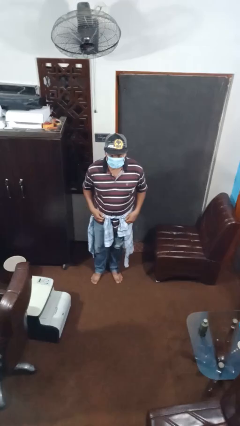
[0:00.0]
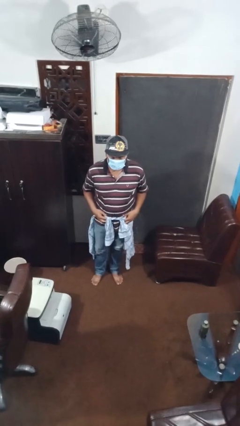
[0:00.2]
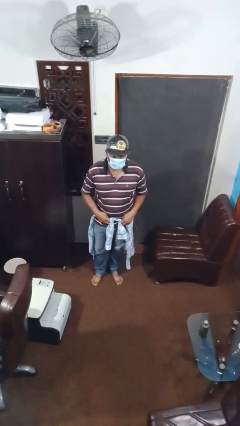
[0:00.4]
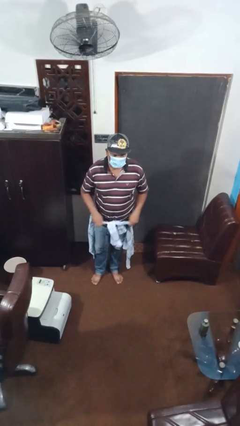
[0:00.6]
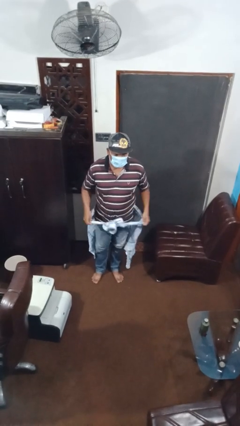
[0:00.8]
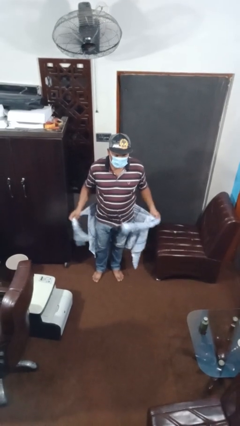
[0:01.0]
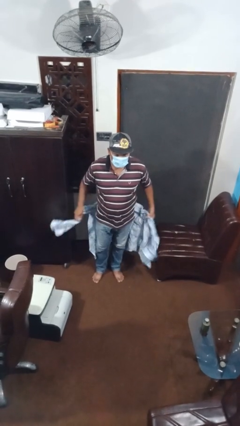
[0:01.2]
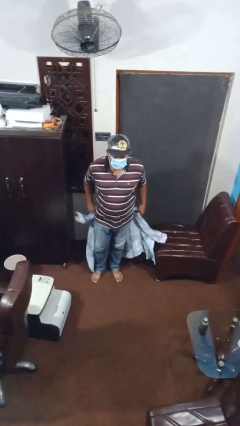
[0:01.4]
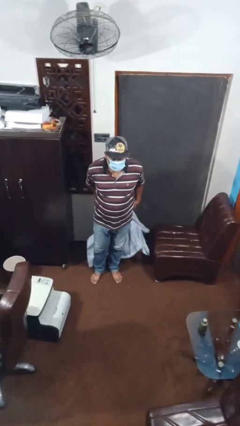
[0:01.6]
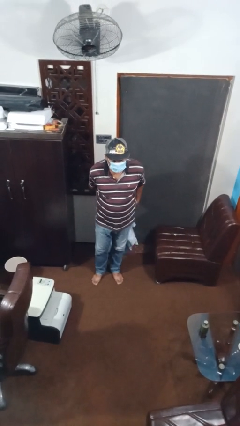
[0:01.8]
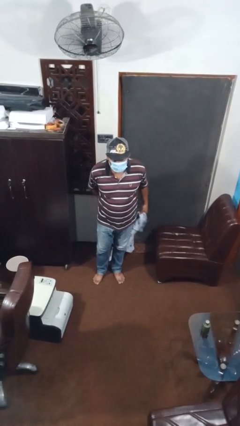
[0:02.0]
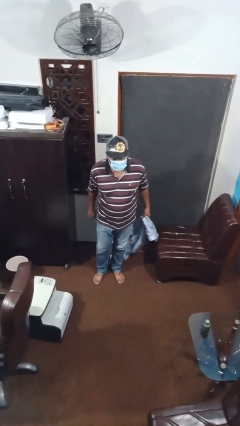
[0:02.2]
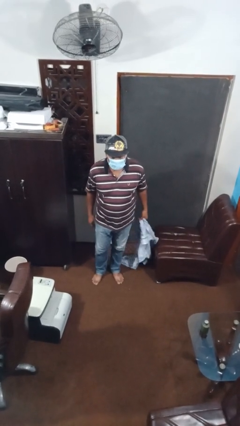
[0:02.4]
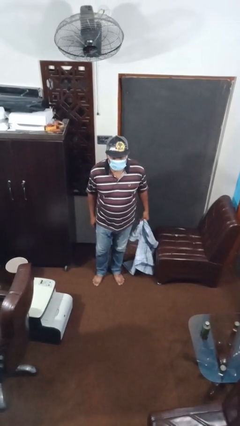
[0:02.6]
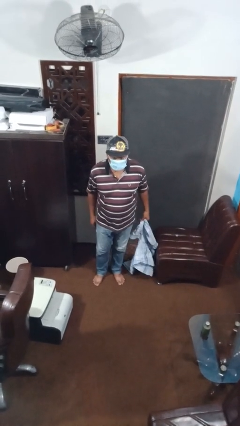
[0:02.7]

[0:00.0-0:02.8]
person unties jacket around waist

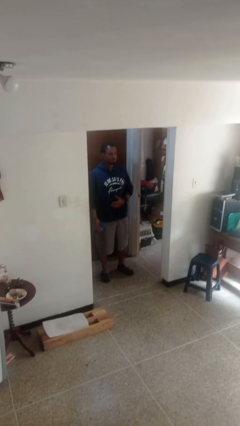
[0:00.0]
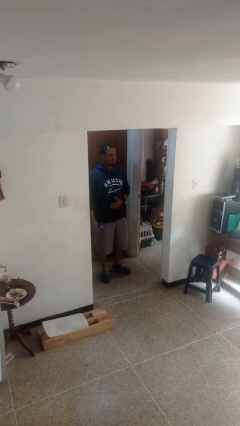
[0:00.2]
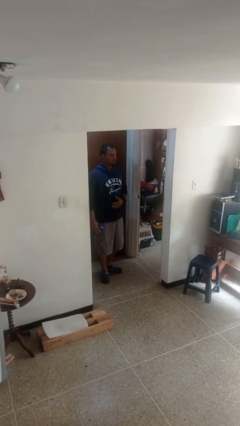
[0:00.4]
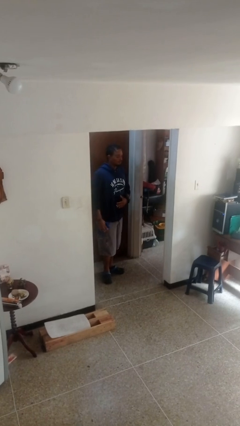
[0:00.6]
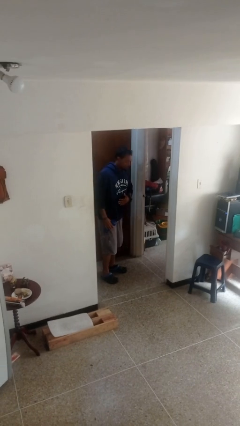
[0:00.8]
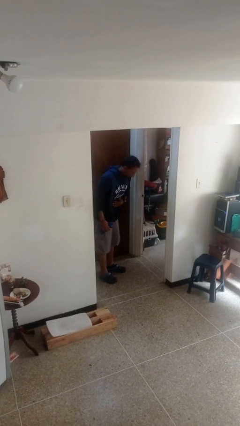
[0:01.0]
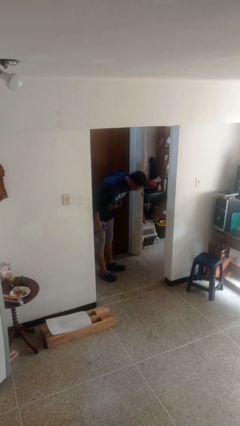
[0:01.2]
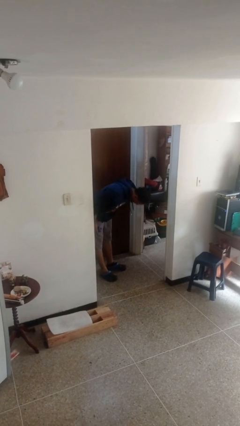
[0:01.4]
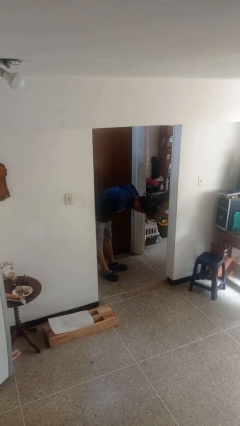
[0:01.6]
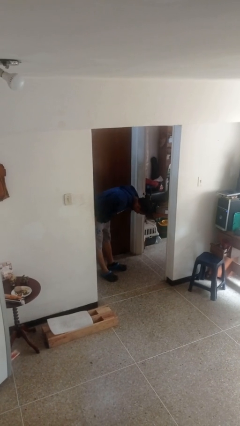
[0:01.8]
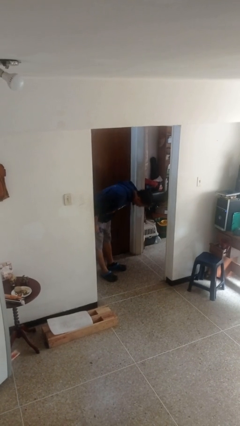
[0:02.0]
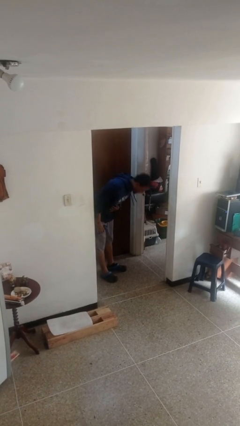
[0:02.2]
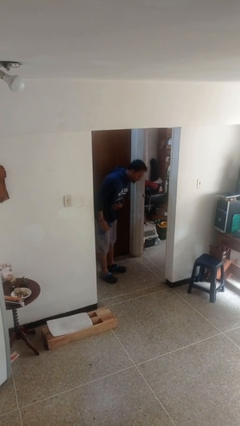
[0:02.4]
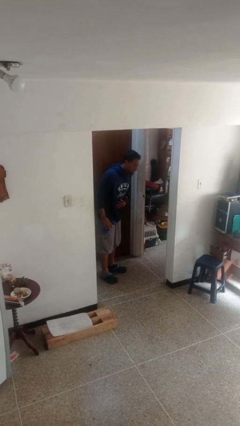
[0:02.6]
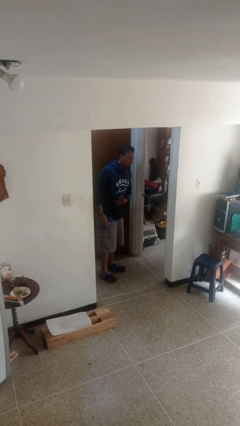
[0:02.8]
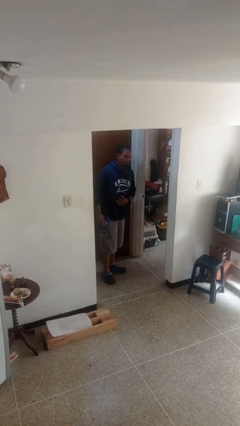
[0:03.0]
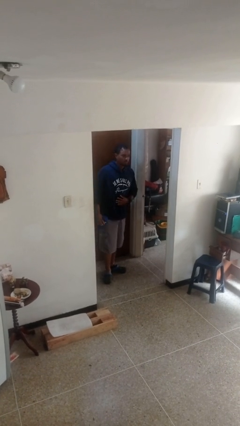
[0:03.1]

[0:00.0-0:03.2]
person bows

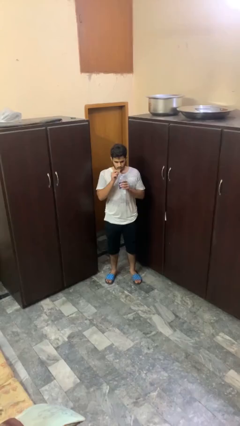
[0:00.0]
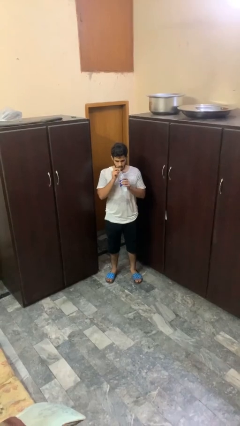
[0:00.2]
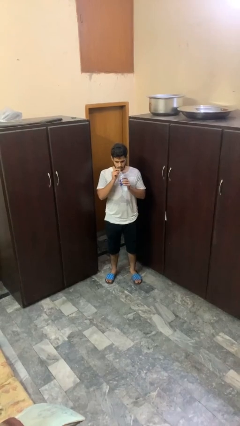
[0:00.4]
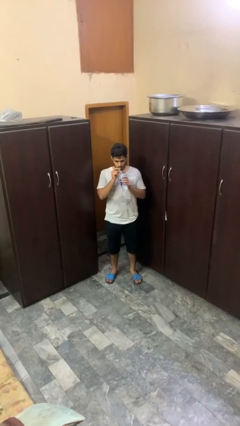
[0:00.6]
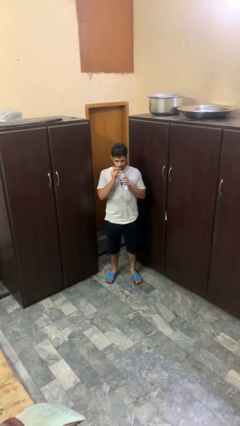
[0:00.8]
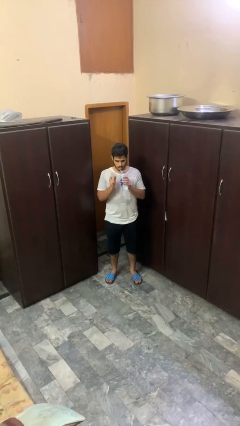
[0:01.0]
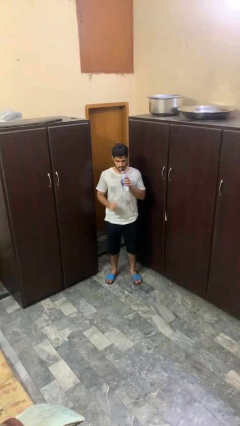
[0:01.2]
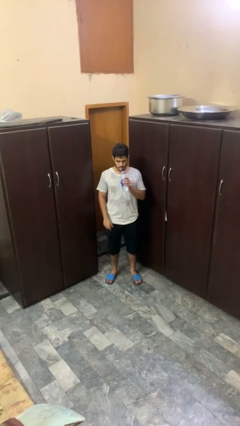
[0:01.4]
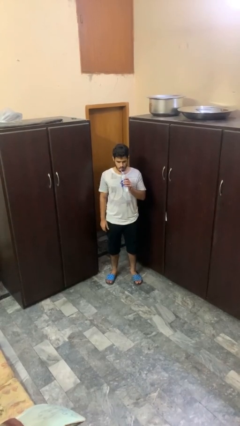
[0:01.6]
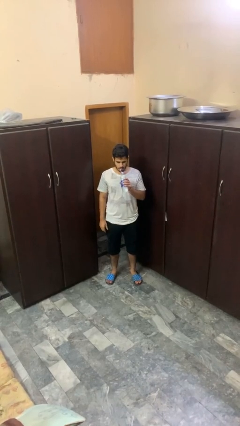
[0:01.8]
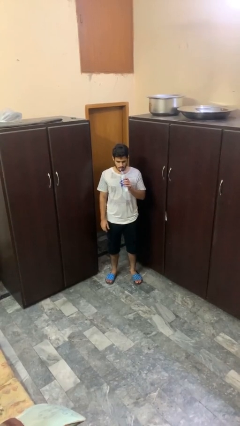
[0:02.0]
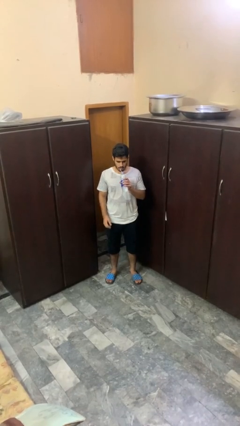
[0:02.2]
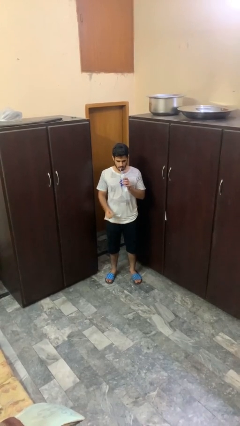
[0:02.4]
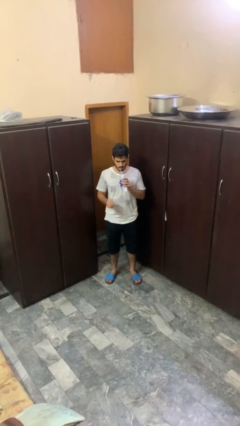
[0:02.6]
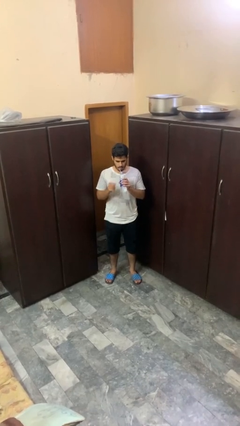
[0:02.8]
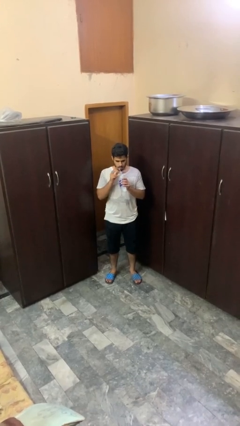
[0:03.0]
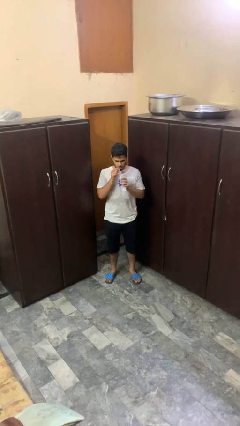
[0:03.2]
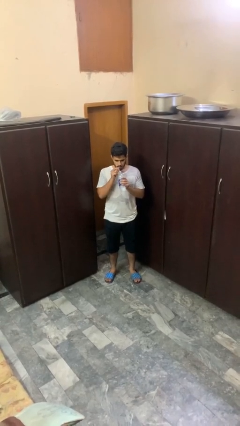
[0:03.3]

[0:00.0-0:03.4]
person drinks from straw

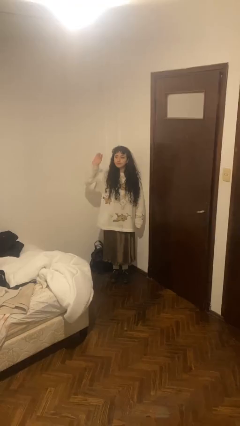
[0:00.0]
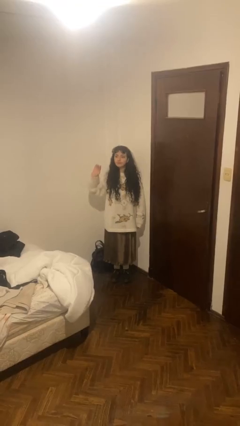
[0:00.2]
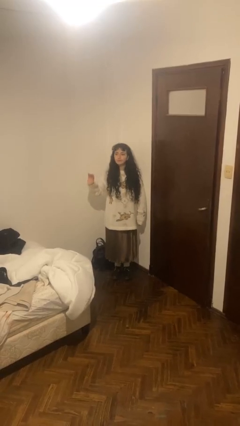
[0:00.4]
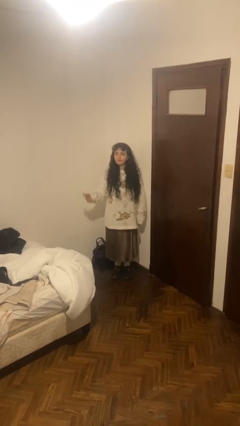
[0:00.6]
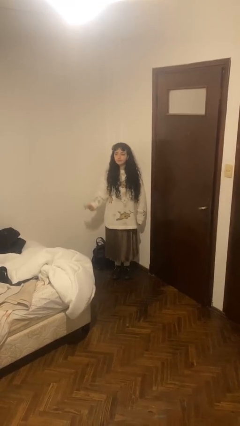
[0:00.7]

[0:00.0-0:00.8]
person gestures lower hand

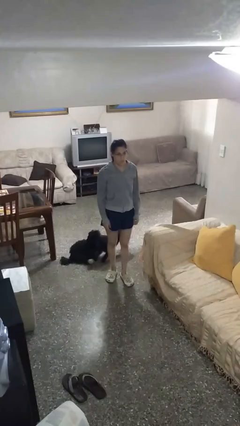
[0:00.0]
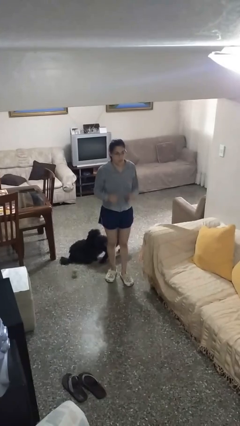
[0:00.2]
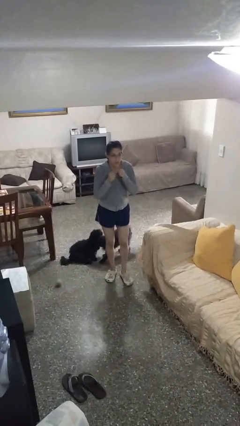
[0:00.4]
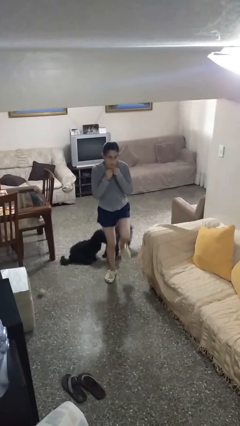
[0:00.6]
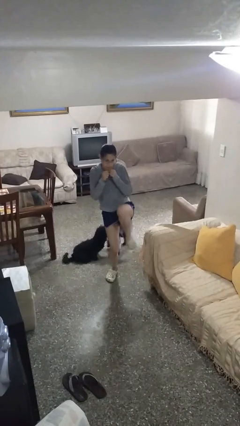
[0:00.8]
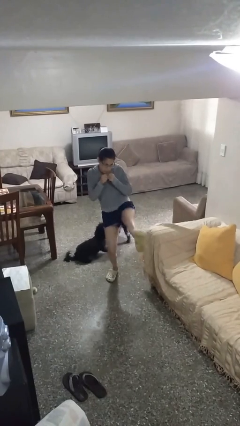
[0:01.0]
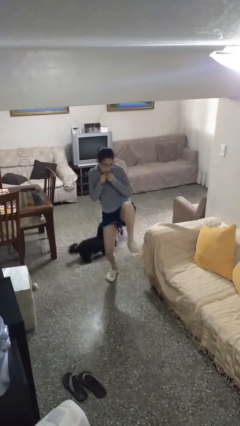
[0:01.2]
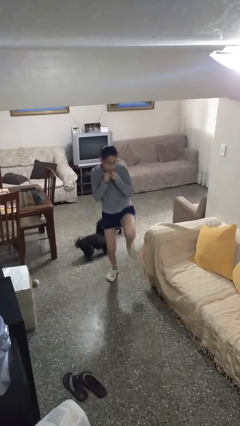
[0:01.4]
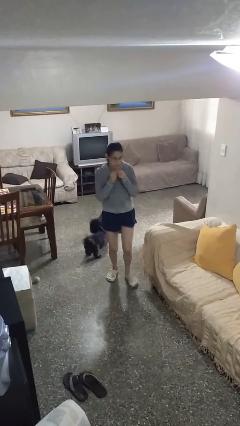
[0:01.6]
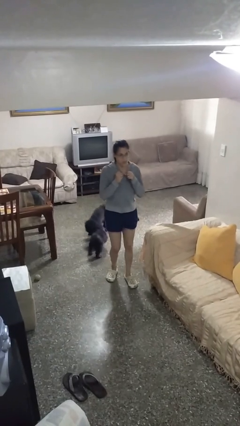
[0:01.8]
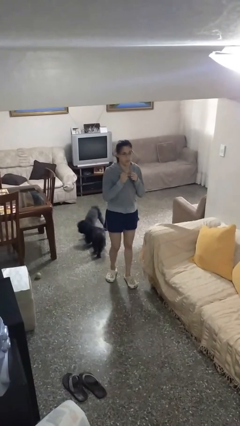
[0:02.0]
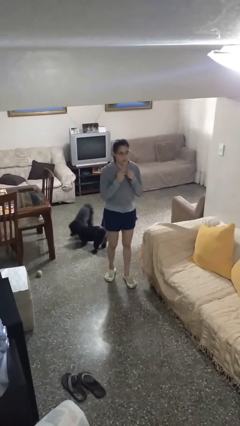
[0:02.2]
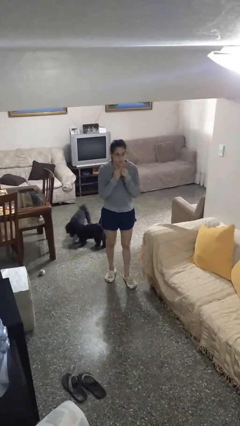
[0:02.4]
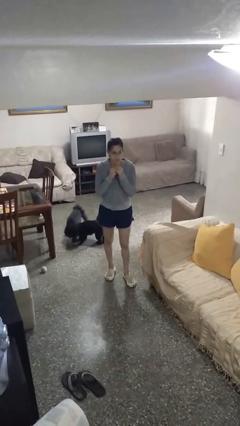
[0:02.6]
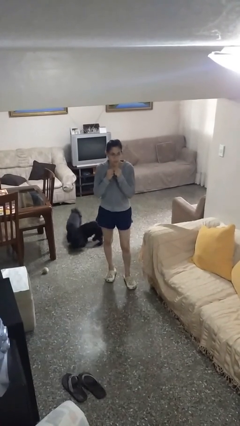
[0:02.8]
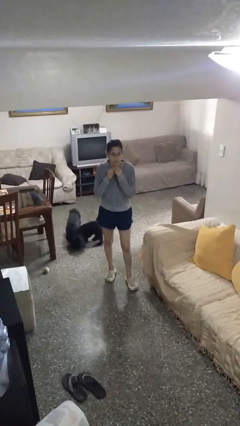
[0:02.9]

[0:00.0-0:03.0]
person karate kicks

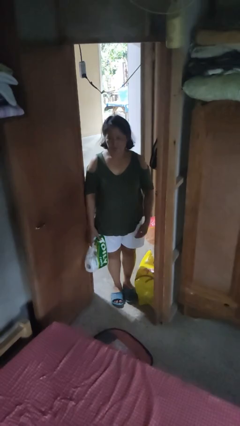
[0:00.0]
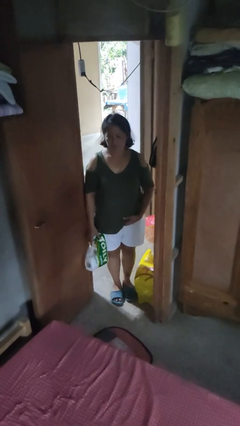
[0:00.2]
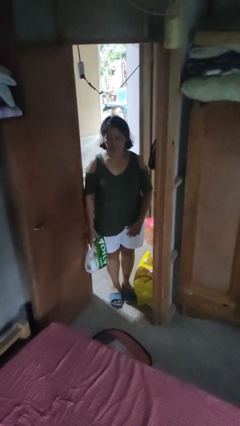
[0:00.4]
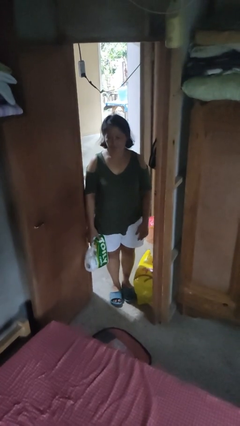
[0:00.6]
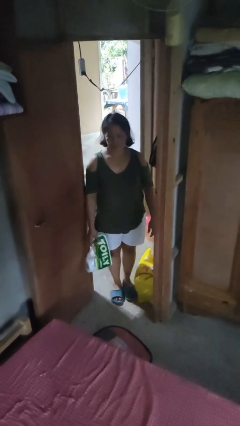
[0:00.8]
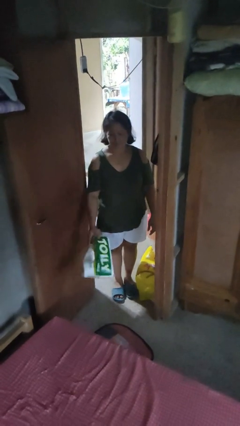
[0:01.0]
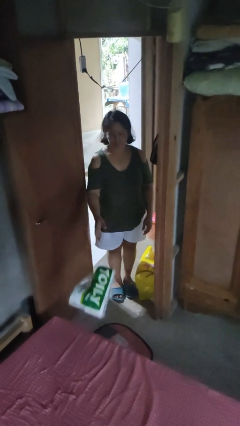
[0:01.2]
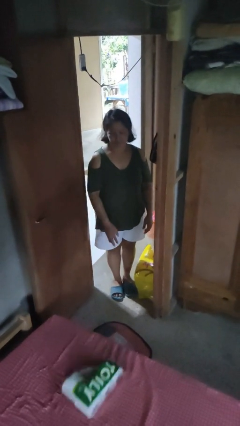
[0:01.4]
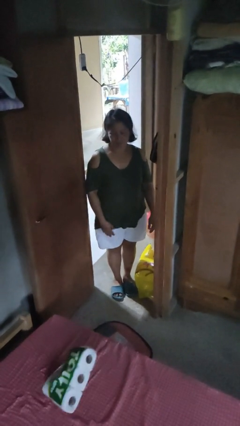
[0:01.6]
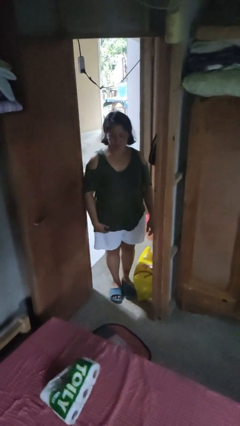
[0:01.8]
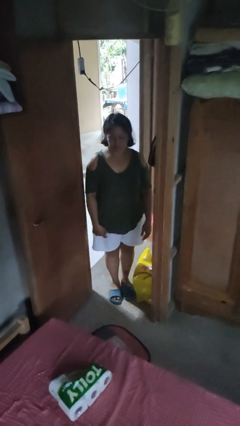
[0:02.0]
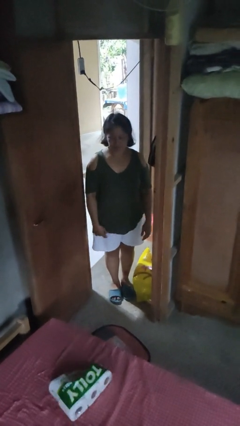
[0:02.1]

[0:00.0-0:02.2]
person throws object on bed

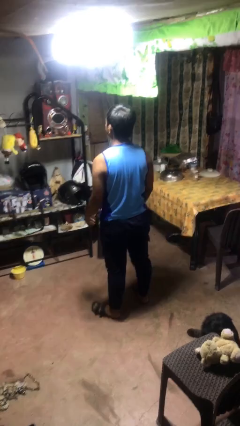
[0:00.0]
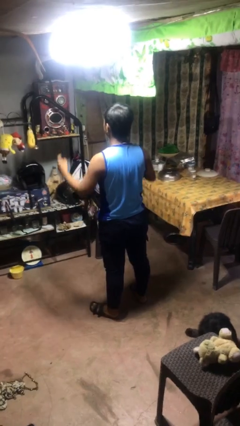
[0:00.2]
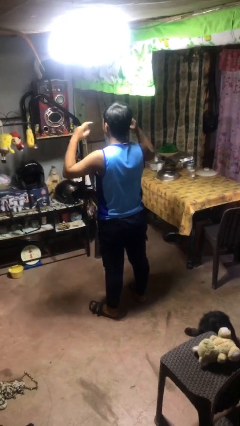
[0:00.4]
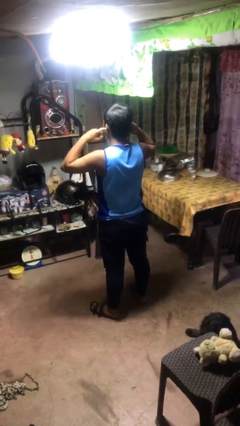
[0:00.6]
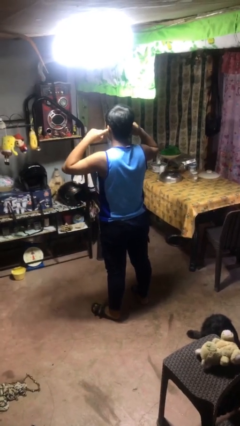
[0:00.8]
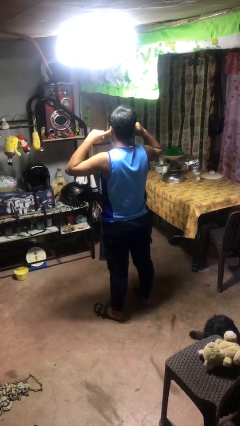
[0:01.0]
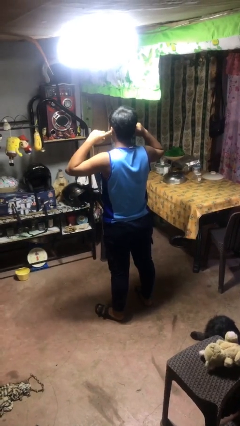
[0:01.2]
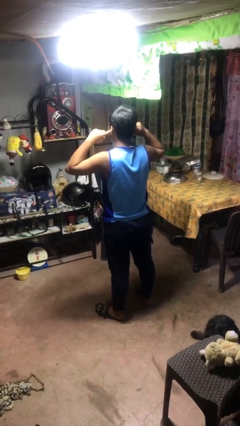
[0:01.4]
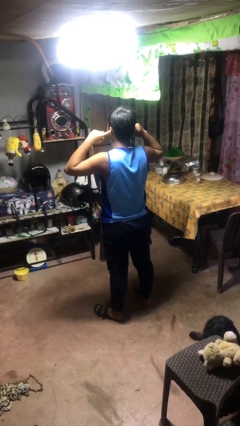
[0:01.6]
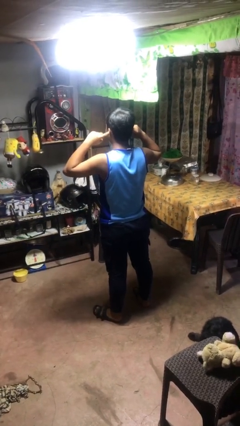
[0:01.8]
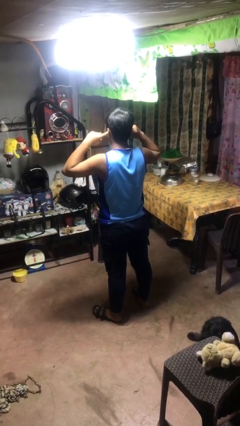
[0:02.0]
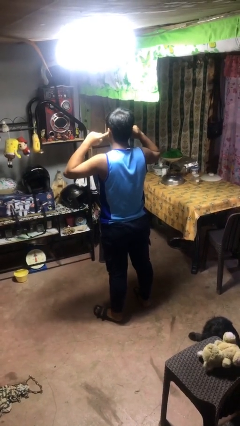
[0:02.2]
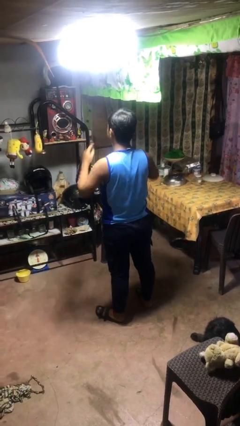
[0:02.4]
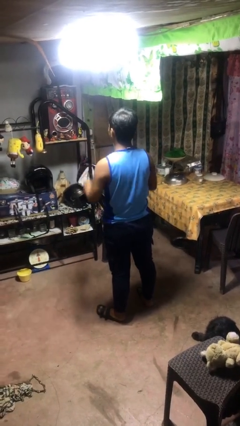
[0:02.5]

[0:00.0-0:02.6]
person puts fingers in ear
